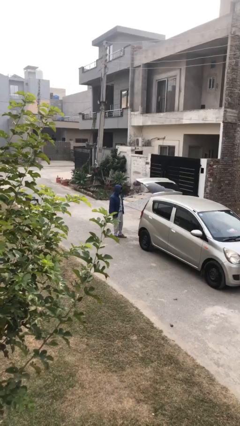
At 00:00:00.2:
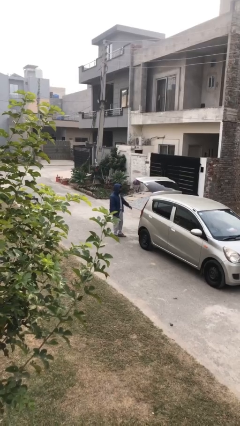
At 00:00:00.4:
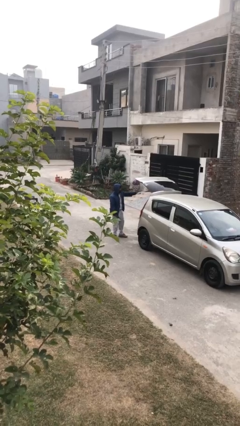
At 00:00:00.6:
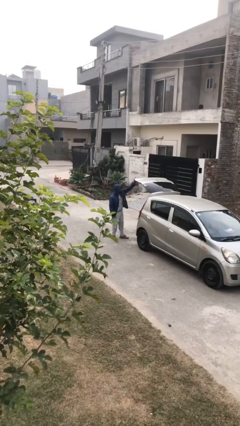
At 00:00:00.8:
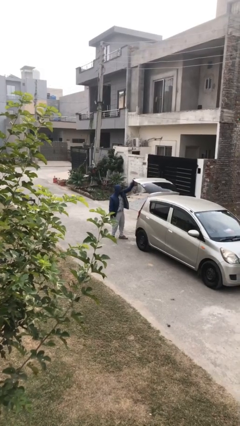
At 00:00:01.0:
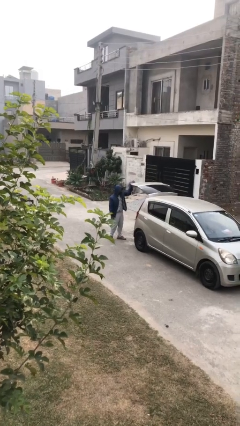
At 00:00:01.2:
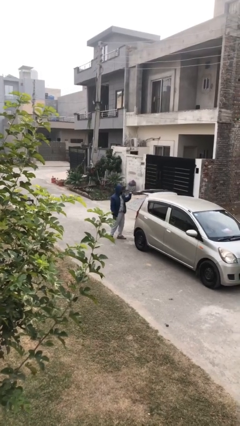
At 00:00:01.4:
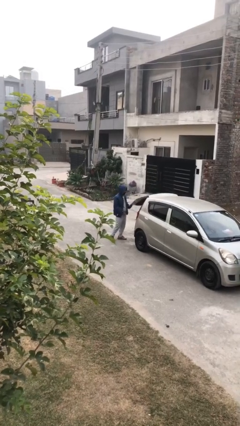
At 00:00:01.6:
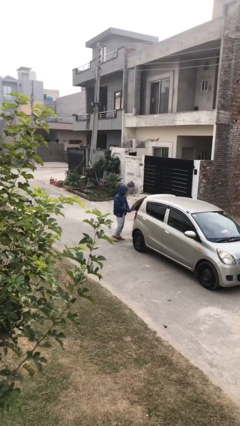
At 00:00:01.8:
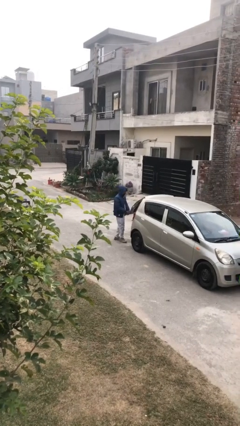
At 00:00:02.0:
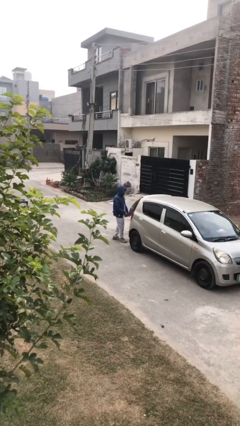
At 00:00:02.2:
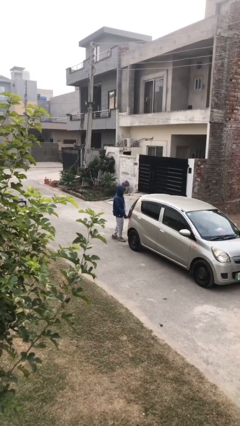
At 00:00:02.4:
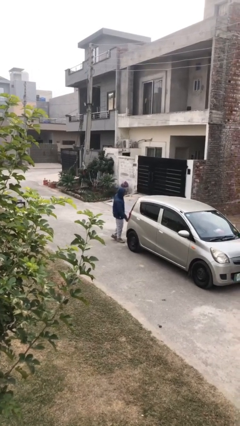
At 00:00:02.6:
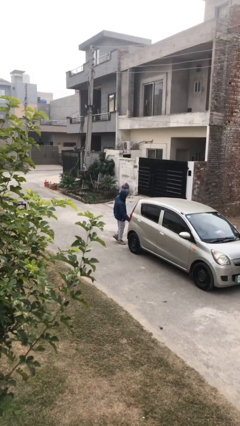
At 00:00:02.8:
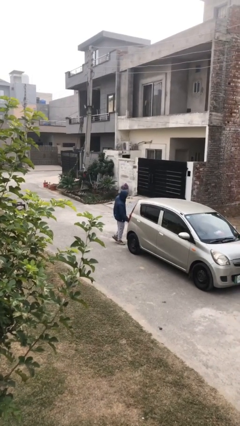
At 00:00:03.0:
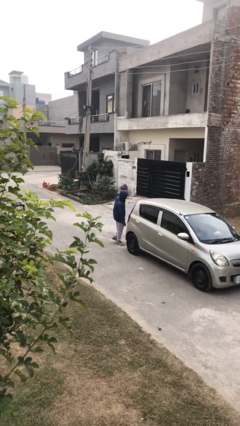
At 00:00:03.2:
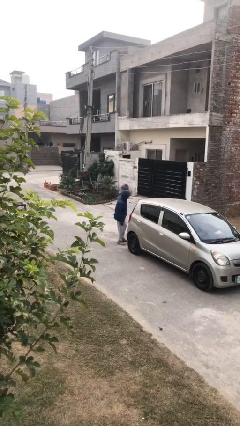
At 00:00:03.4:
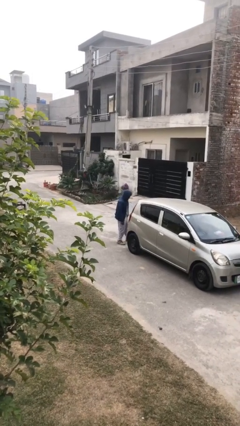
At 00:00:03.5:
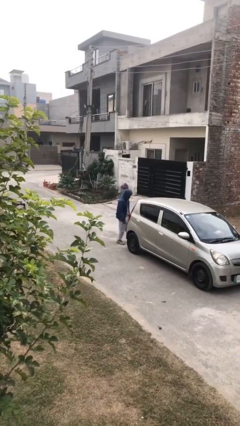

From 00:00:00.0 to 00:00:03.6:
person closes car trunk

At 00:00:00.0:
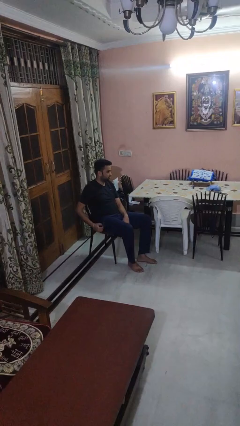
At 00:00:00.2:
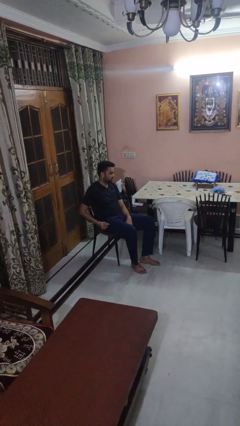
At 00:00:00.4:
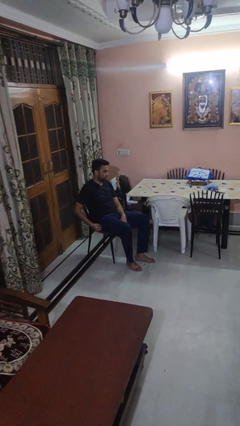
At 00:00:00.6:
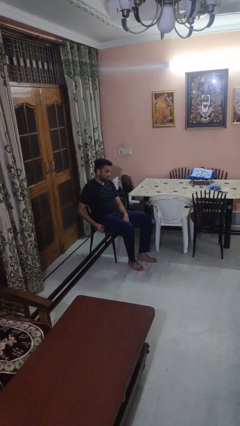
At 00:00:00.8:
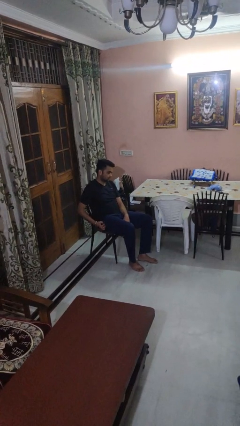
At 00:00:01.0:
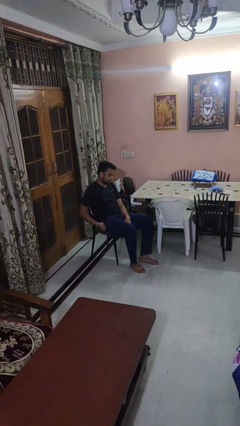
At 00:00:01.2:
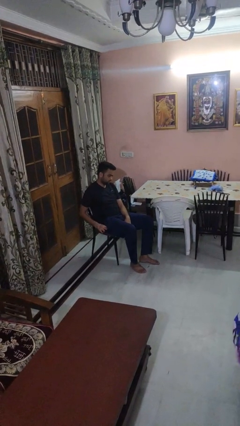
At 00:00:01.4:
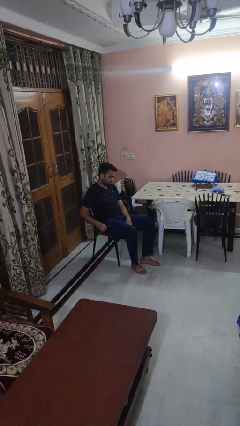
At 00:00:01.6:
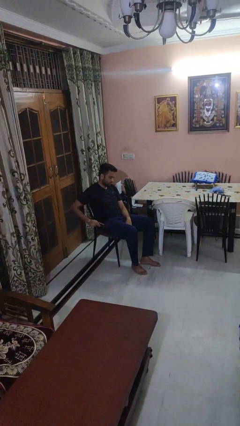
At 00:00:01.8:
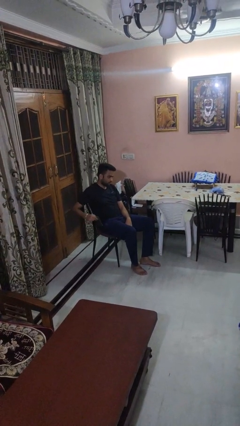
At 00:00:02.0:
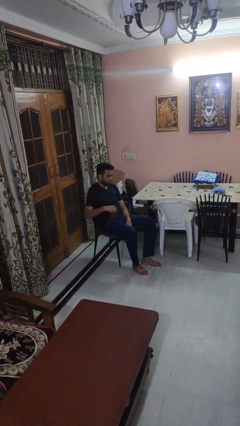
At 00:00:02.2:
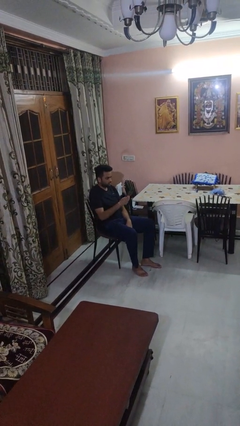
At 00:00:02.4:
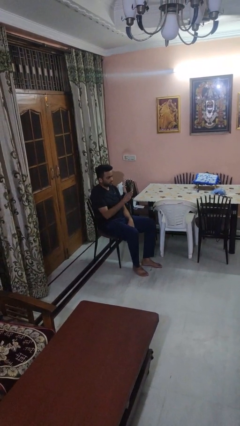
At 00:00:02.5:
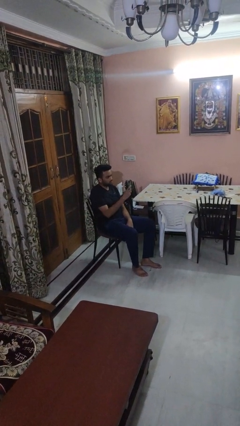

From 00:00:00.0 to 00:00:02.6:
person takes phone from pocket

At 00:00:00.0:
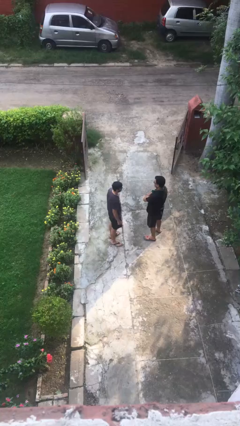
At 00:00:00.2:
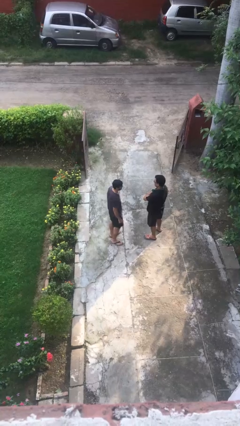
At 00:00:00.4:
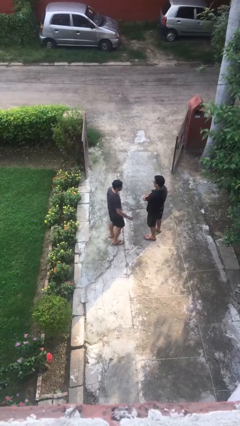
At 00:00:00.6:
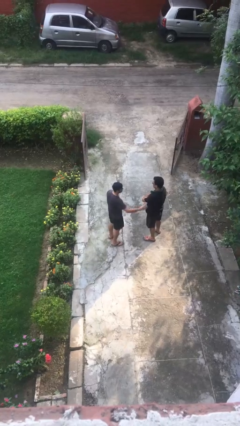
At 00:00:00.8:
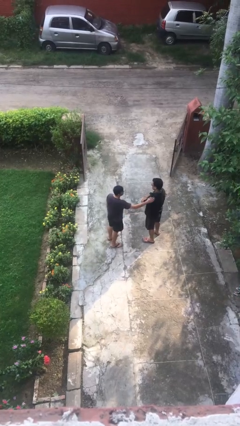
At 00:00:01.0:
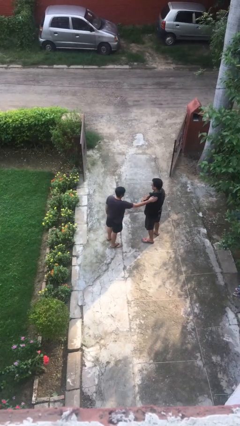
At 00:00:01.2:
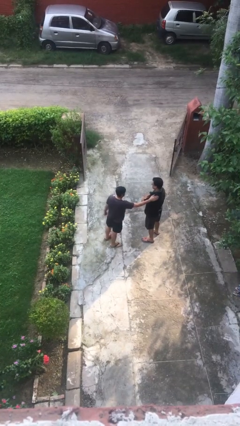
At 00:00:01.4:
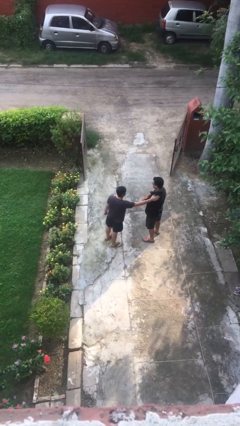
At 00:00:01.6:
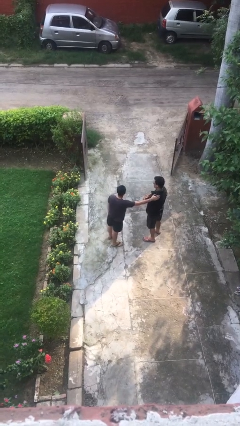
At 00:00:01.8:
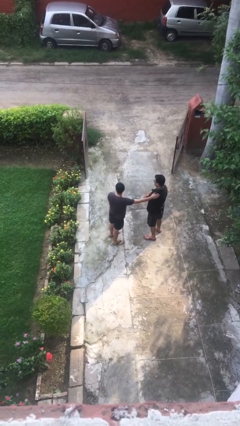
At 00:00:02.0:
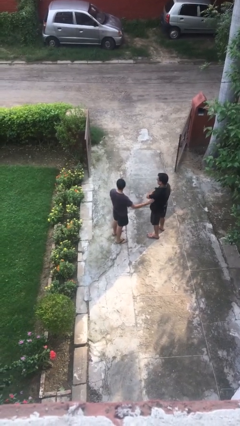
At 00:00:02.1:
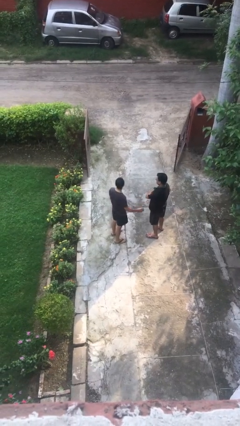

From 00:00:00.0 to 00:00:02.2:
person pounds shoulders of person

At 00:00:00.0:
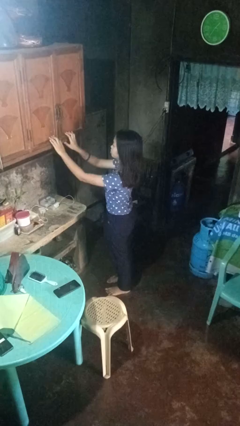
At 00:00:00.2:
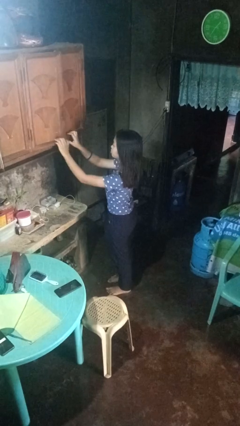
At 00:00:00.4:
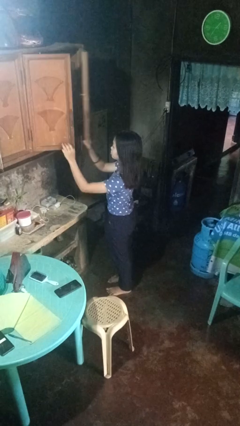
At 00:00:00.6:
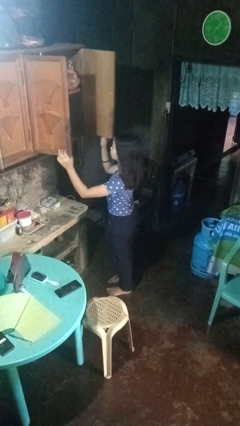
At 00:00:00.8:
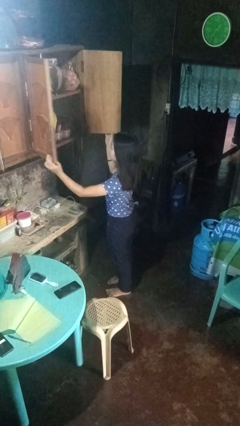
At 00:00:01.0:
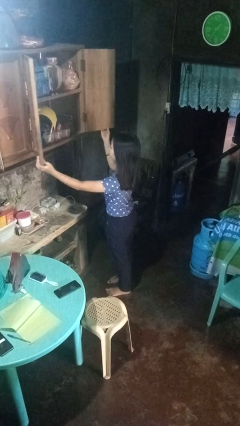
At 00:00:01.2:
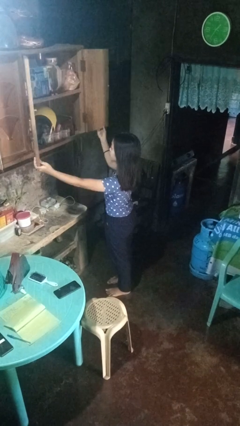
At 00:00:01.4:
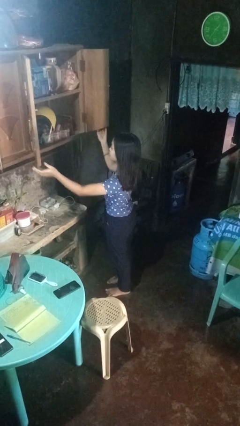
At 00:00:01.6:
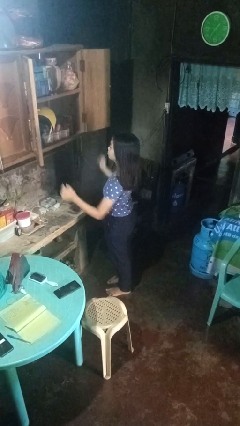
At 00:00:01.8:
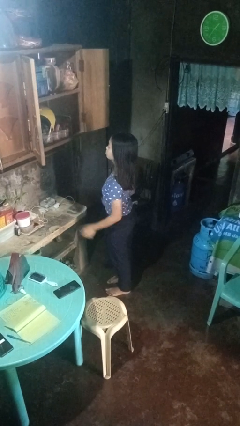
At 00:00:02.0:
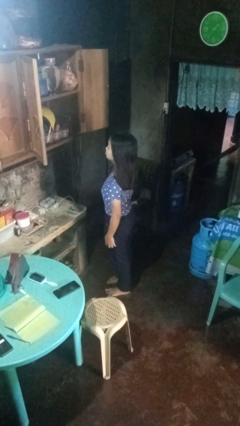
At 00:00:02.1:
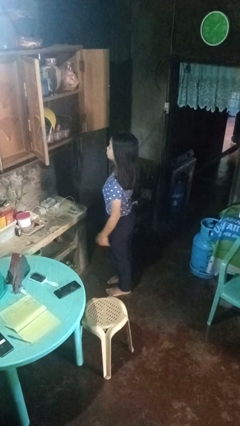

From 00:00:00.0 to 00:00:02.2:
person opens cabinet

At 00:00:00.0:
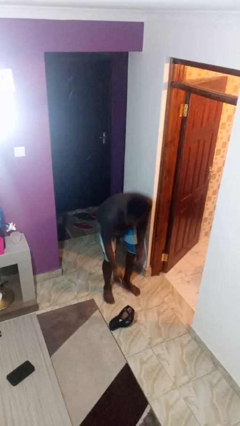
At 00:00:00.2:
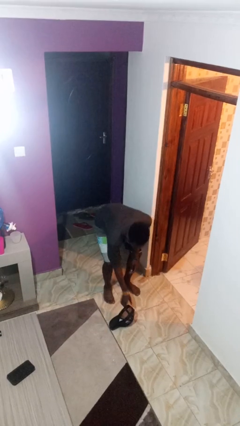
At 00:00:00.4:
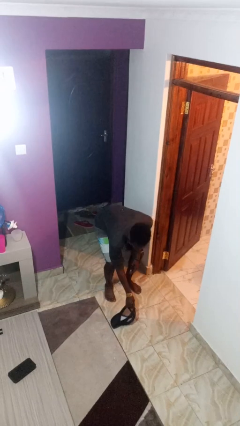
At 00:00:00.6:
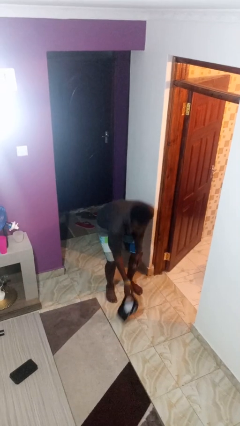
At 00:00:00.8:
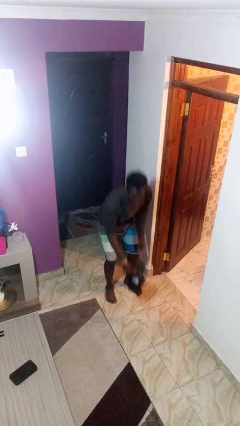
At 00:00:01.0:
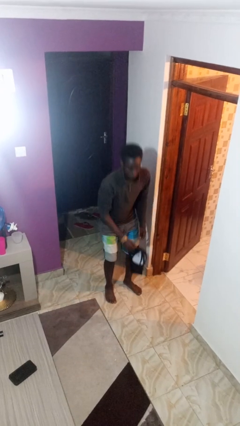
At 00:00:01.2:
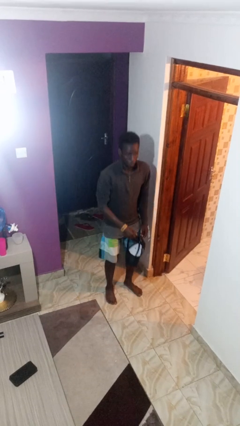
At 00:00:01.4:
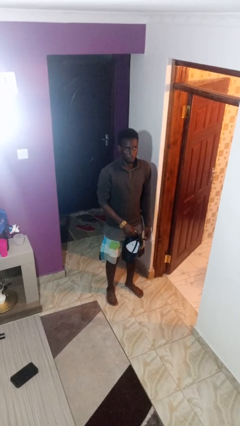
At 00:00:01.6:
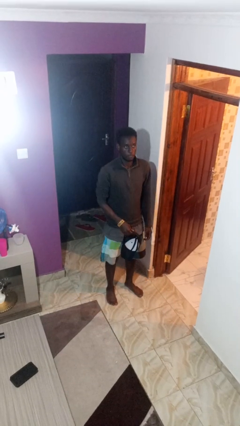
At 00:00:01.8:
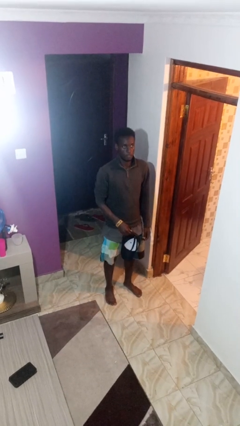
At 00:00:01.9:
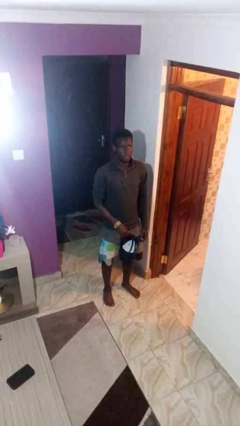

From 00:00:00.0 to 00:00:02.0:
person picks up object from floor

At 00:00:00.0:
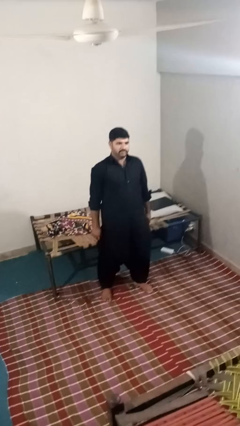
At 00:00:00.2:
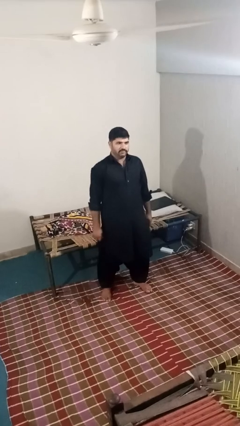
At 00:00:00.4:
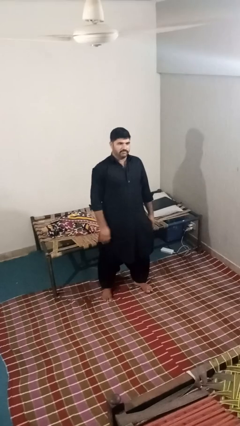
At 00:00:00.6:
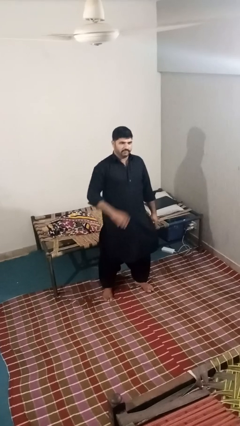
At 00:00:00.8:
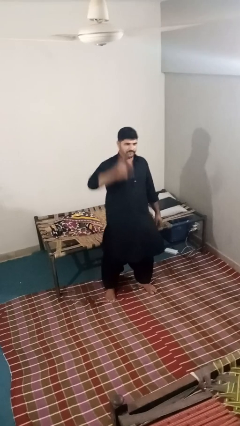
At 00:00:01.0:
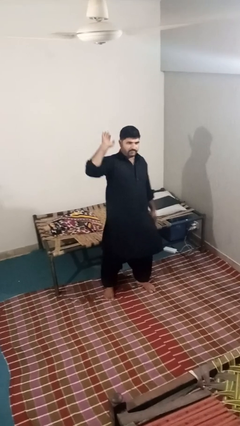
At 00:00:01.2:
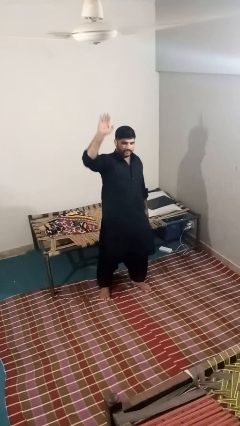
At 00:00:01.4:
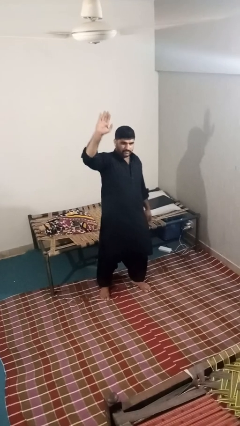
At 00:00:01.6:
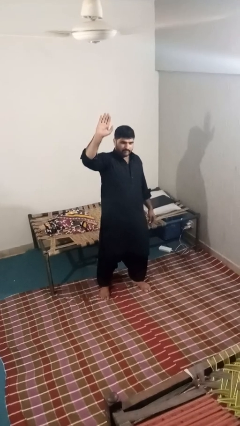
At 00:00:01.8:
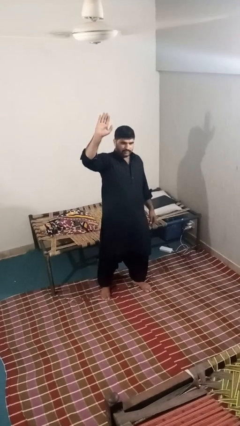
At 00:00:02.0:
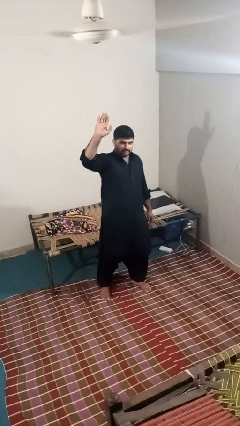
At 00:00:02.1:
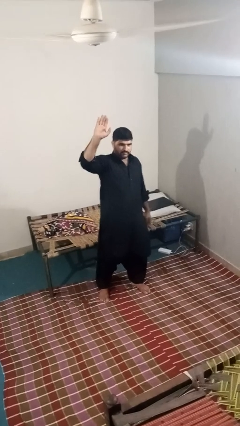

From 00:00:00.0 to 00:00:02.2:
person gestures raise hand

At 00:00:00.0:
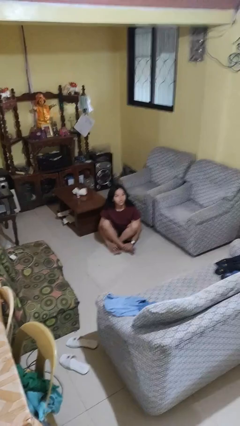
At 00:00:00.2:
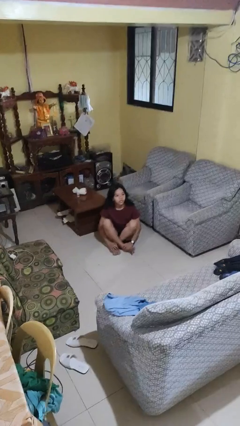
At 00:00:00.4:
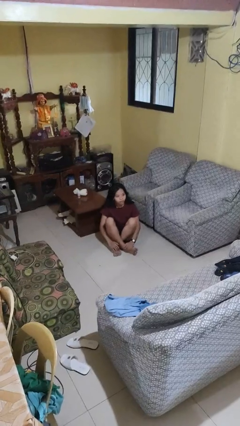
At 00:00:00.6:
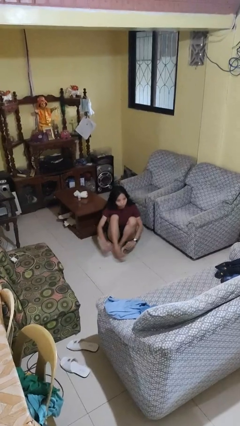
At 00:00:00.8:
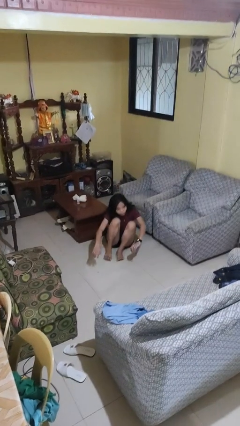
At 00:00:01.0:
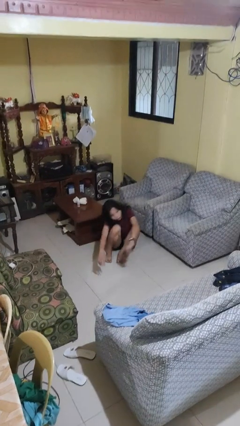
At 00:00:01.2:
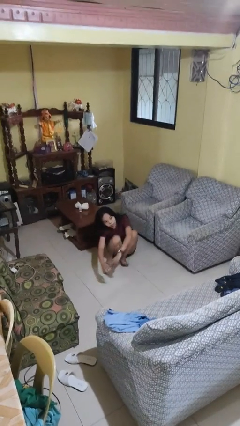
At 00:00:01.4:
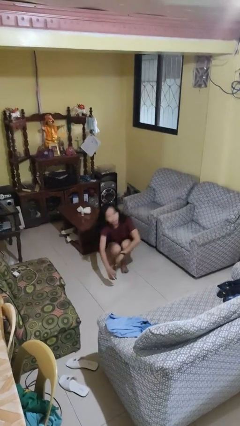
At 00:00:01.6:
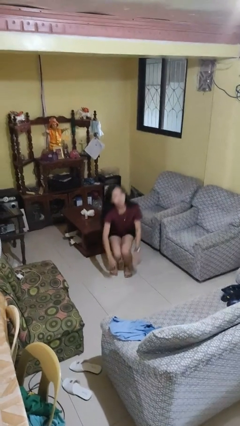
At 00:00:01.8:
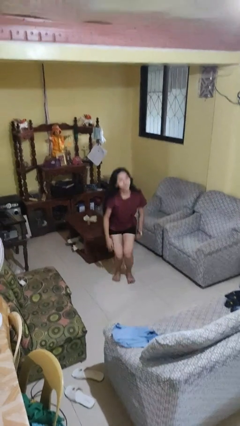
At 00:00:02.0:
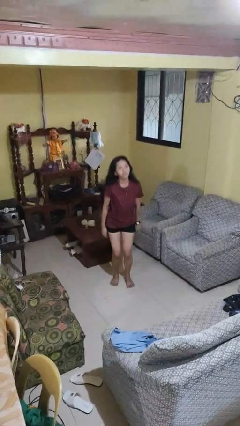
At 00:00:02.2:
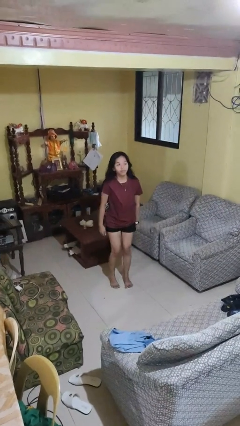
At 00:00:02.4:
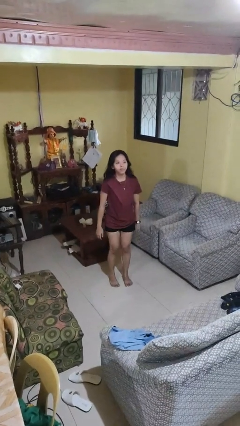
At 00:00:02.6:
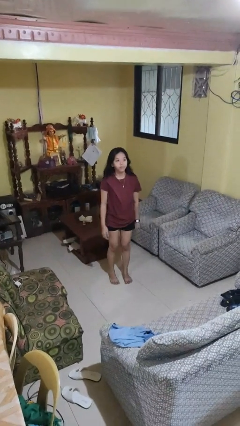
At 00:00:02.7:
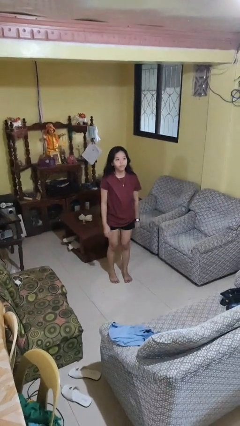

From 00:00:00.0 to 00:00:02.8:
person stands up from floor
